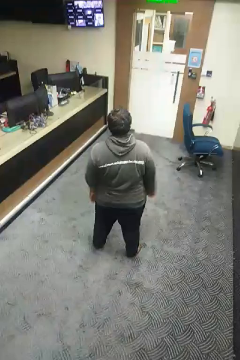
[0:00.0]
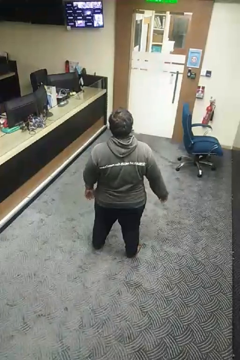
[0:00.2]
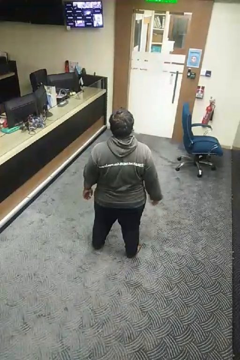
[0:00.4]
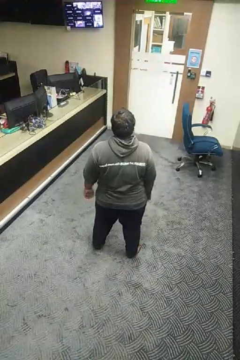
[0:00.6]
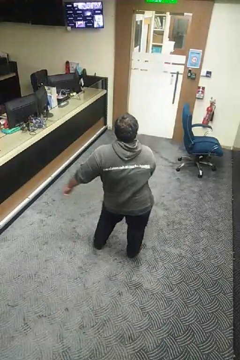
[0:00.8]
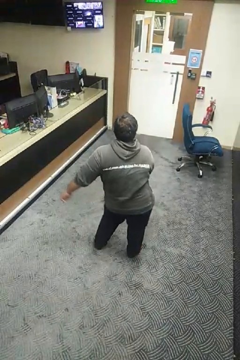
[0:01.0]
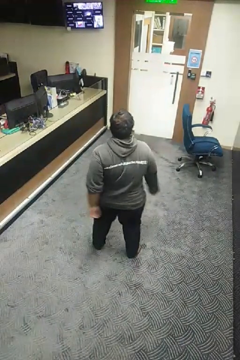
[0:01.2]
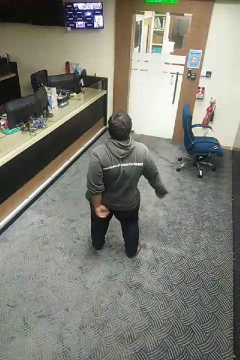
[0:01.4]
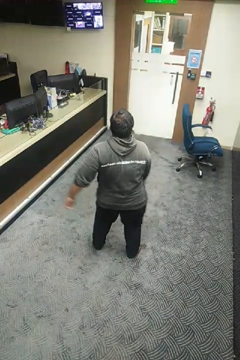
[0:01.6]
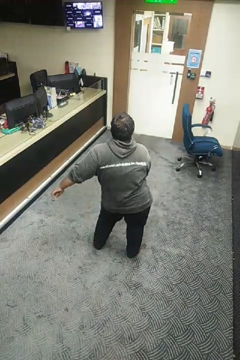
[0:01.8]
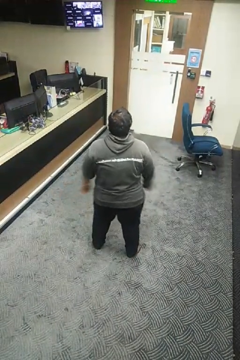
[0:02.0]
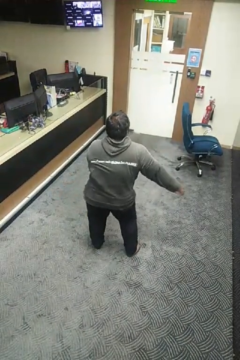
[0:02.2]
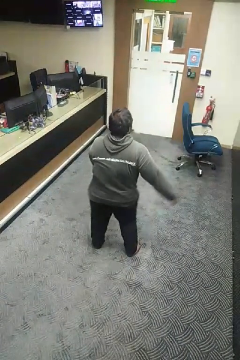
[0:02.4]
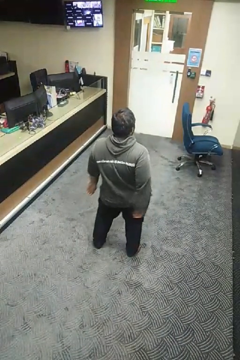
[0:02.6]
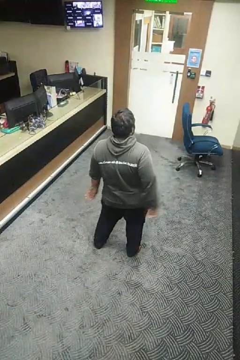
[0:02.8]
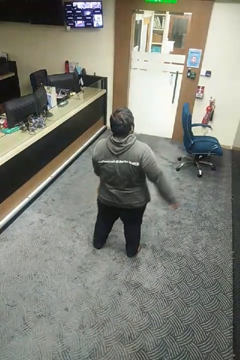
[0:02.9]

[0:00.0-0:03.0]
person dances in place

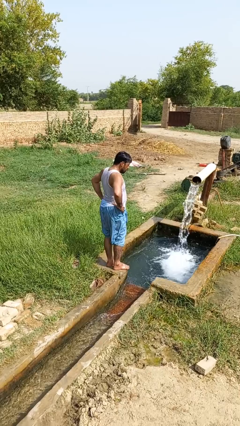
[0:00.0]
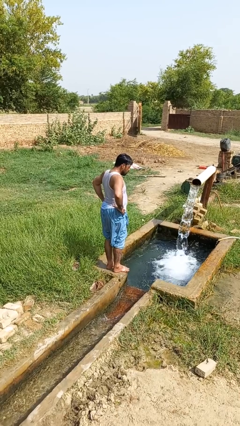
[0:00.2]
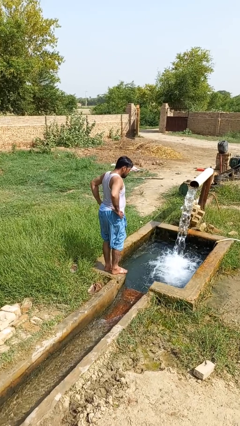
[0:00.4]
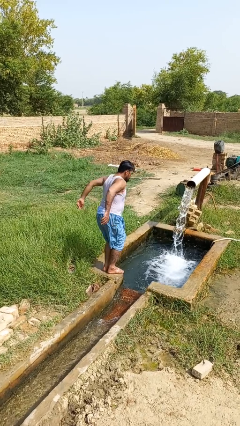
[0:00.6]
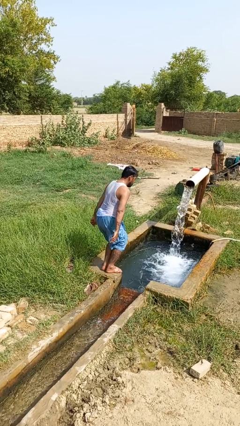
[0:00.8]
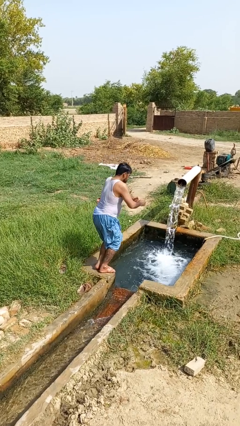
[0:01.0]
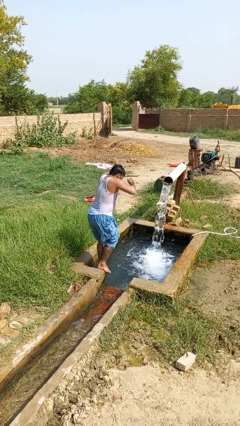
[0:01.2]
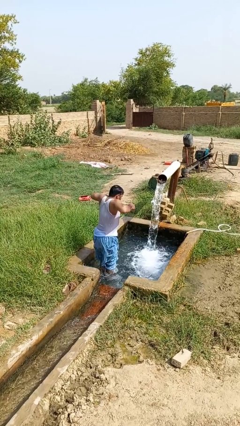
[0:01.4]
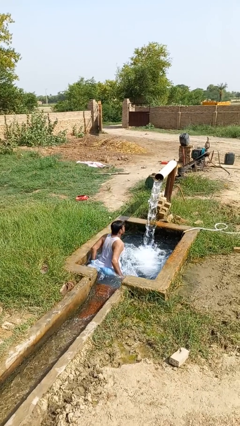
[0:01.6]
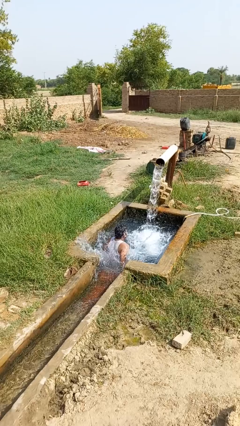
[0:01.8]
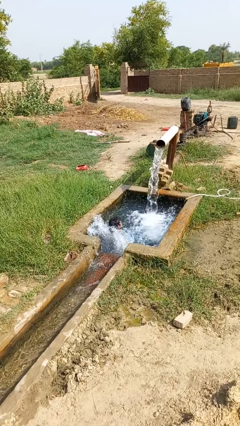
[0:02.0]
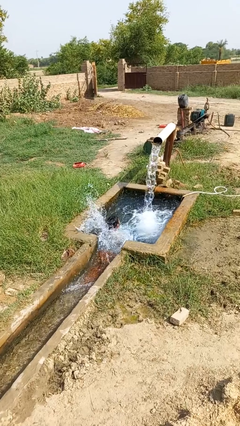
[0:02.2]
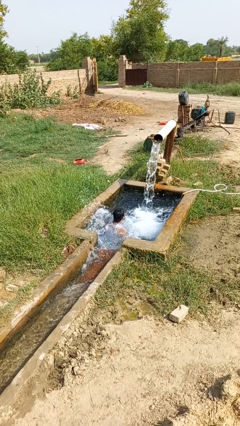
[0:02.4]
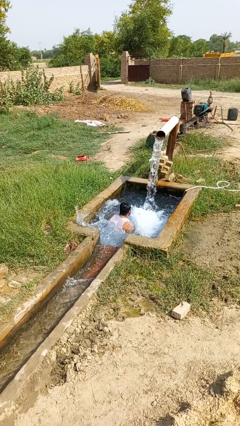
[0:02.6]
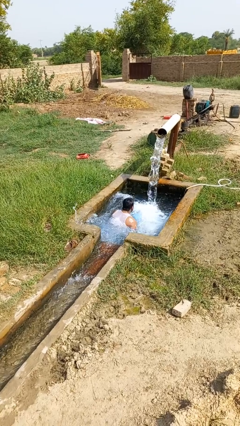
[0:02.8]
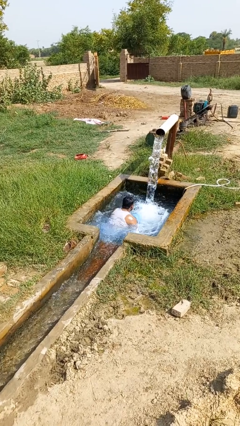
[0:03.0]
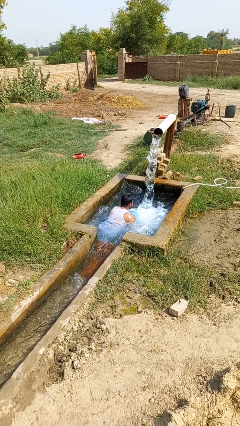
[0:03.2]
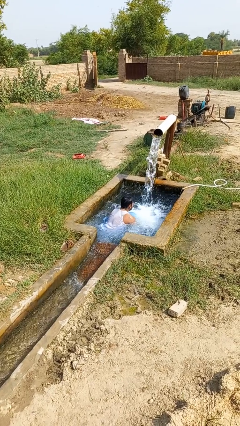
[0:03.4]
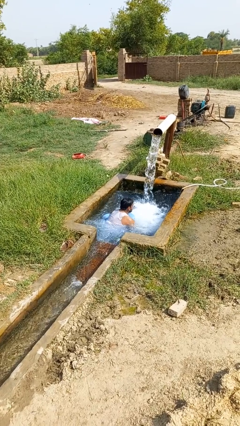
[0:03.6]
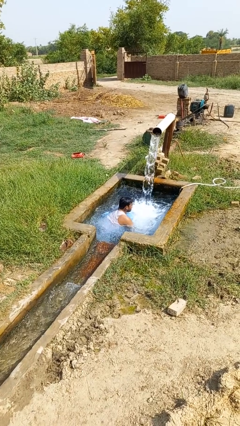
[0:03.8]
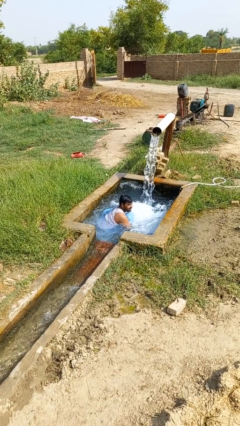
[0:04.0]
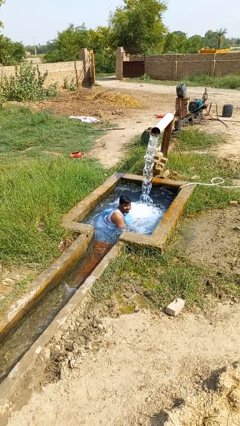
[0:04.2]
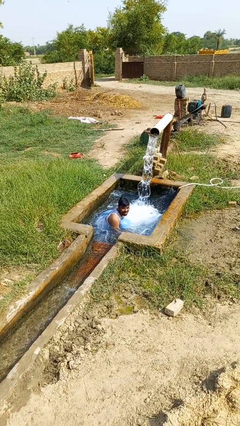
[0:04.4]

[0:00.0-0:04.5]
person jumps into pool

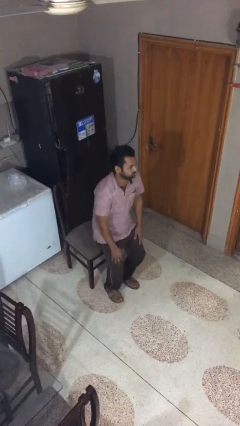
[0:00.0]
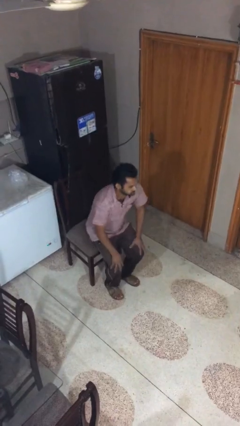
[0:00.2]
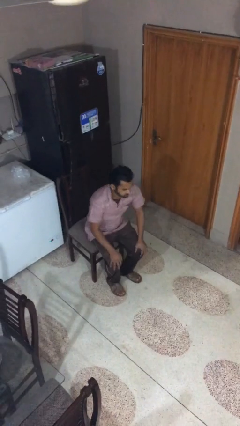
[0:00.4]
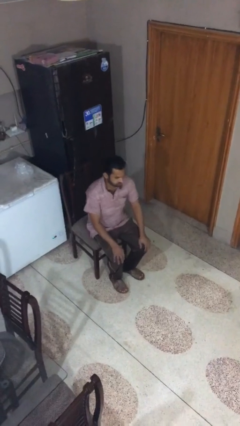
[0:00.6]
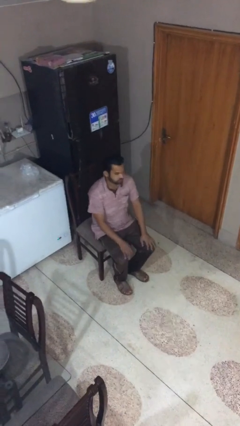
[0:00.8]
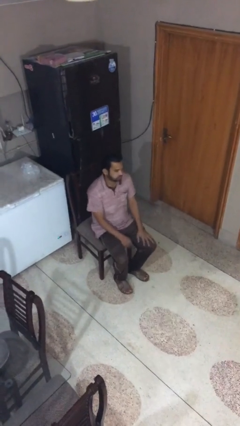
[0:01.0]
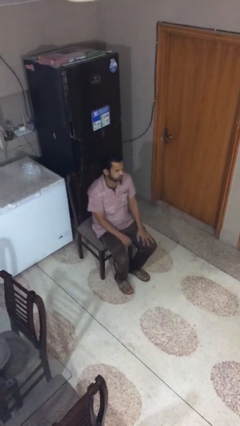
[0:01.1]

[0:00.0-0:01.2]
person sits down

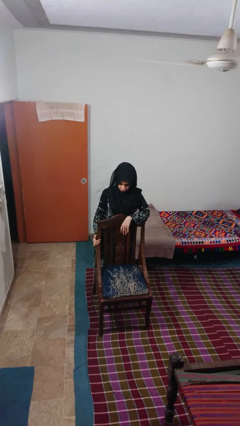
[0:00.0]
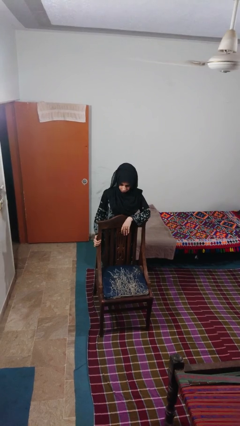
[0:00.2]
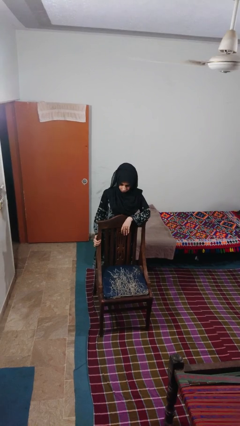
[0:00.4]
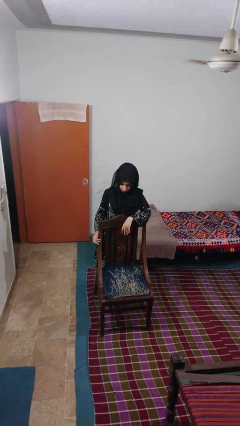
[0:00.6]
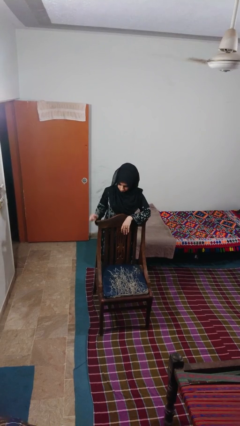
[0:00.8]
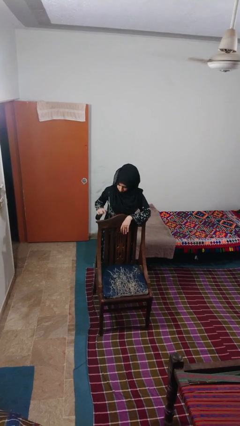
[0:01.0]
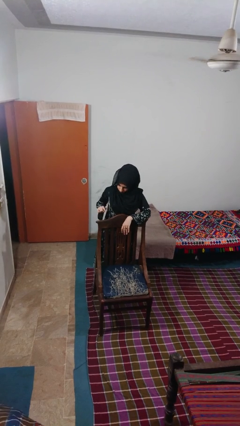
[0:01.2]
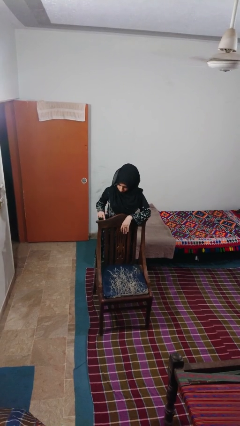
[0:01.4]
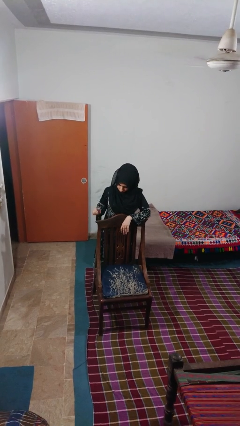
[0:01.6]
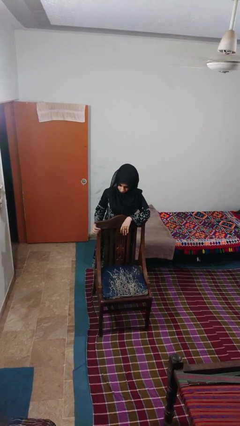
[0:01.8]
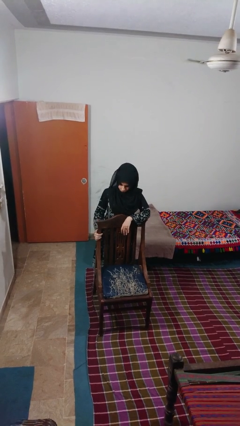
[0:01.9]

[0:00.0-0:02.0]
person taps object with finger

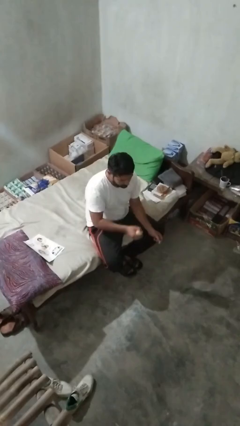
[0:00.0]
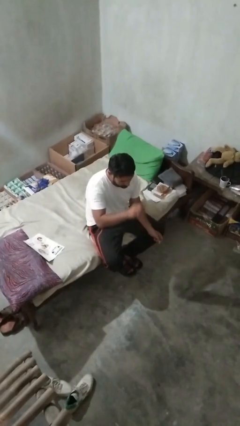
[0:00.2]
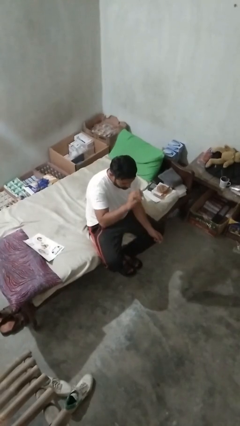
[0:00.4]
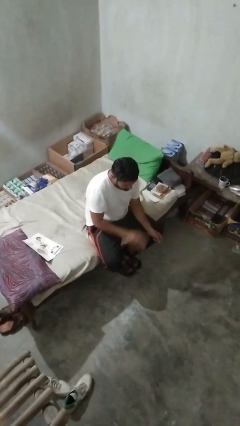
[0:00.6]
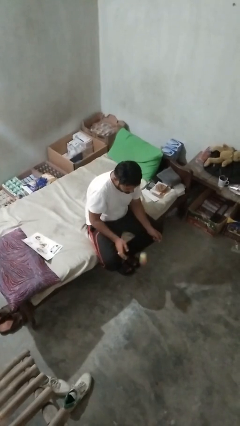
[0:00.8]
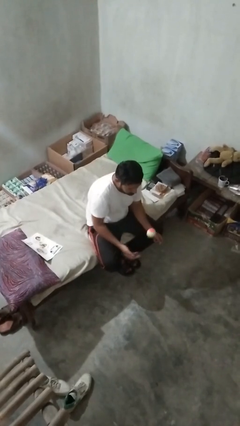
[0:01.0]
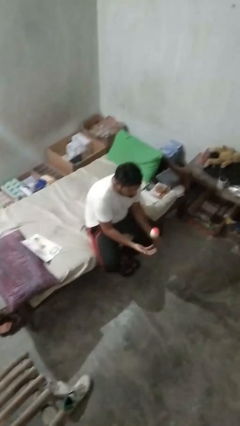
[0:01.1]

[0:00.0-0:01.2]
person bounces ball on floor

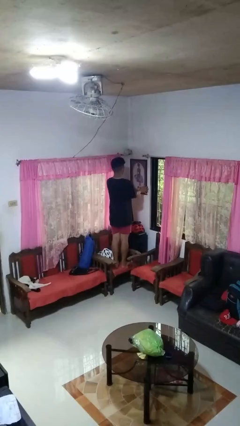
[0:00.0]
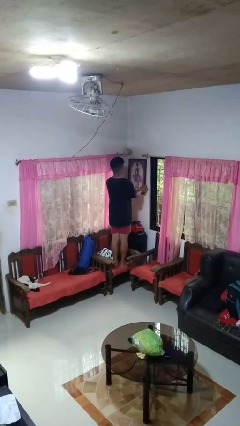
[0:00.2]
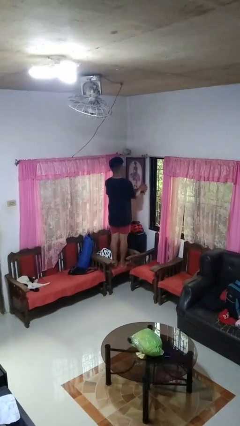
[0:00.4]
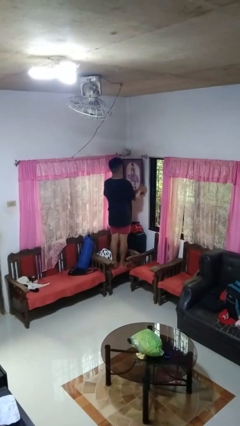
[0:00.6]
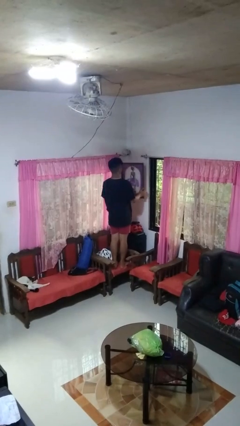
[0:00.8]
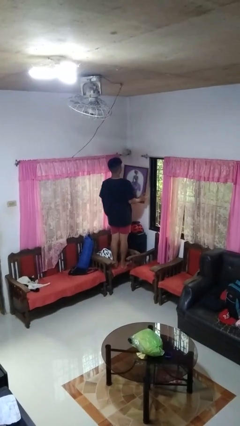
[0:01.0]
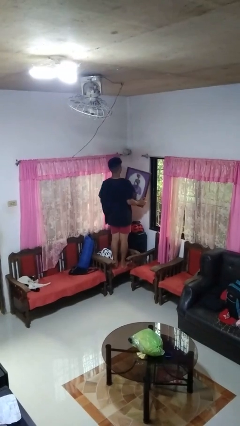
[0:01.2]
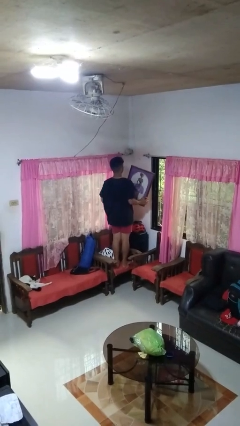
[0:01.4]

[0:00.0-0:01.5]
person takes down picture frame

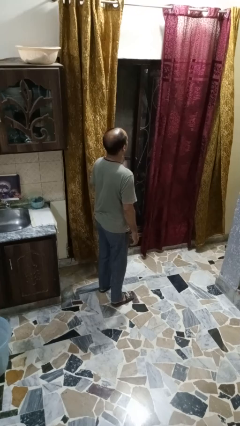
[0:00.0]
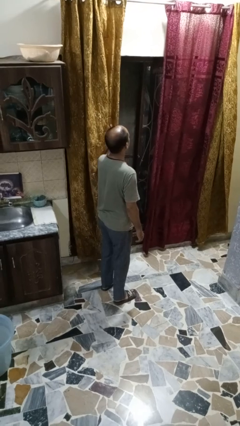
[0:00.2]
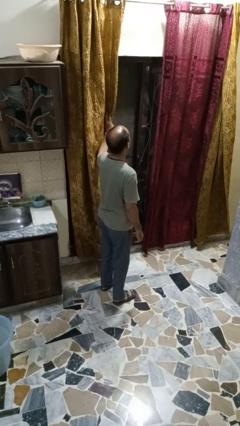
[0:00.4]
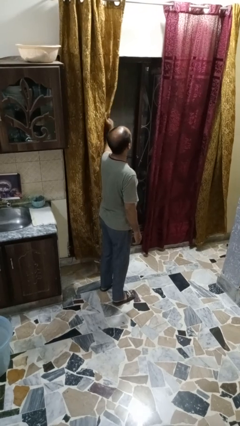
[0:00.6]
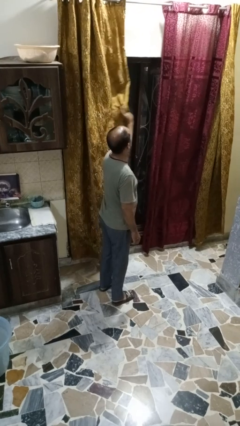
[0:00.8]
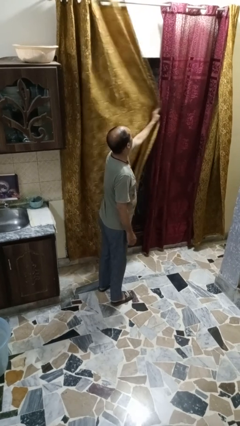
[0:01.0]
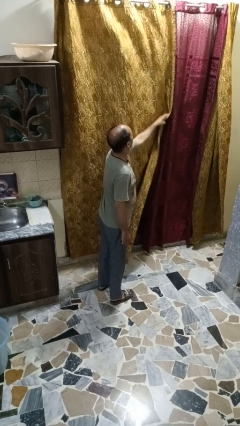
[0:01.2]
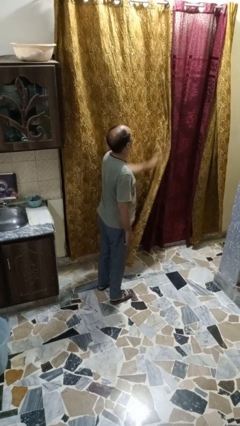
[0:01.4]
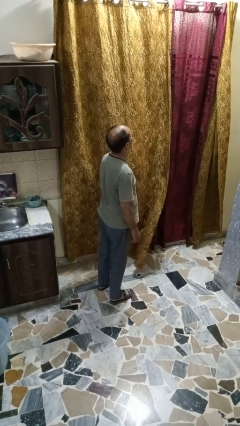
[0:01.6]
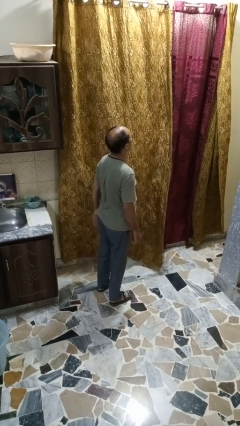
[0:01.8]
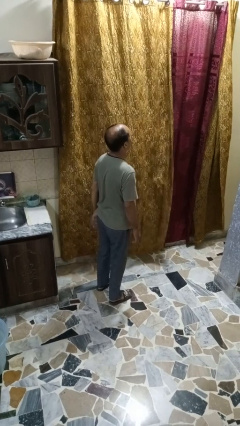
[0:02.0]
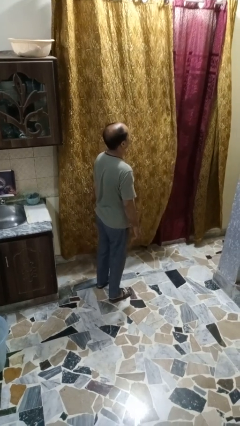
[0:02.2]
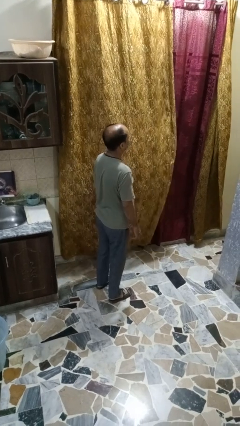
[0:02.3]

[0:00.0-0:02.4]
person closes curtains

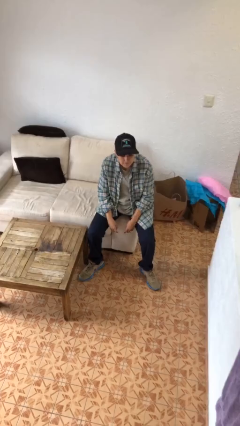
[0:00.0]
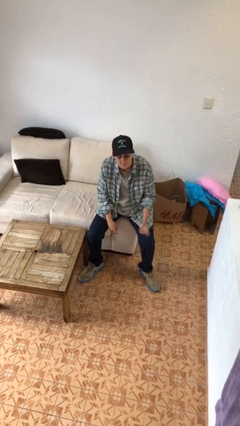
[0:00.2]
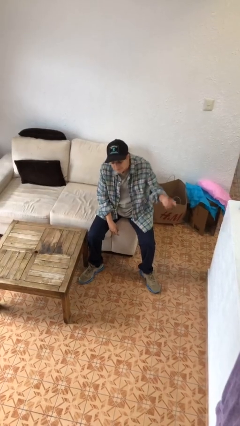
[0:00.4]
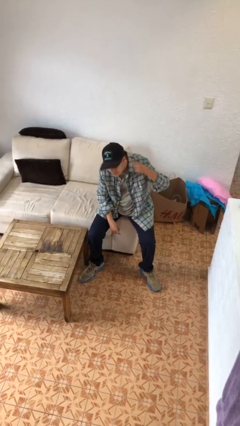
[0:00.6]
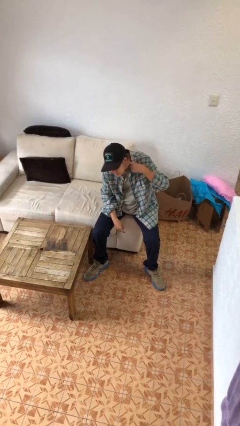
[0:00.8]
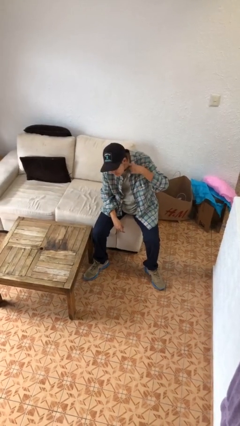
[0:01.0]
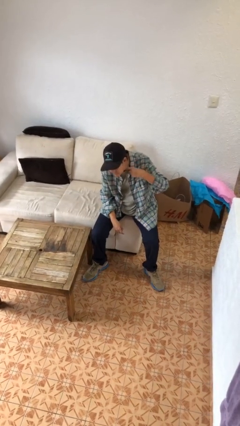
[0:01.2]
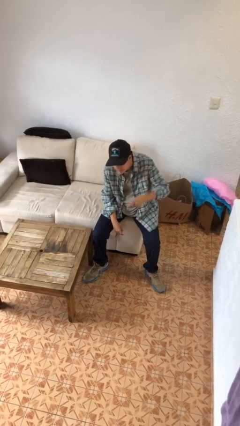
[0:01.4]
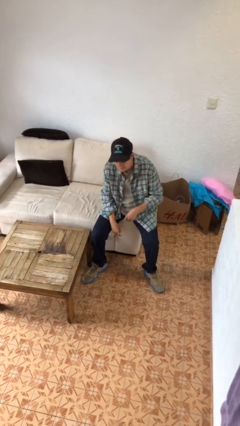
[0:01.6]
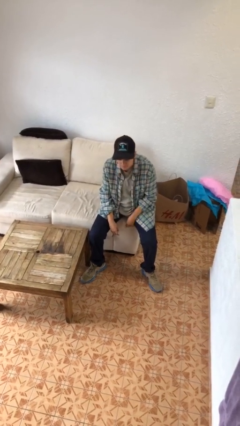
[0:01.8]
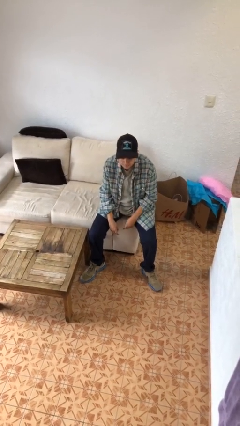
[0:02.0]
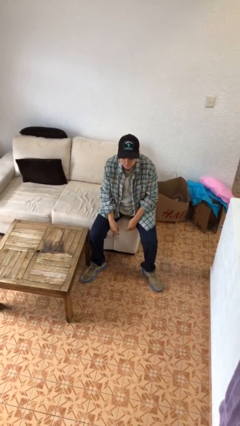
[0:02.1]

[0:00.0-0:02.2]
person gestures listen closely
